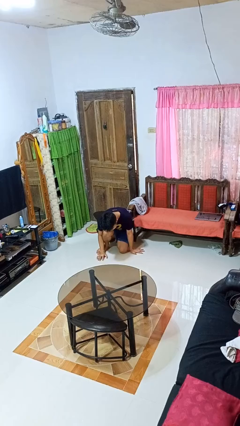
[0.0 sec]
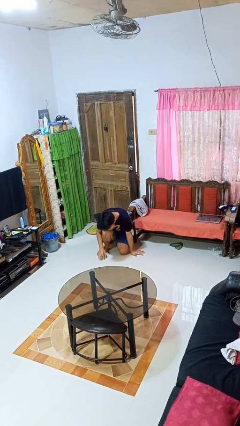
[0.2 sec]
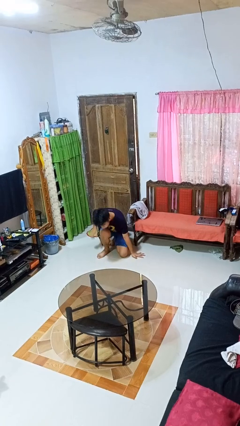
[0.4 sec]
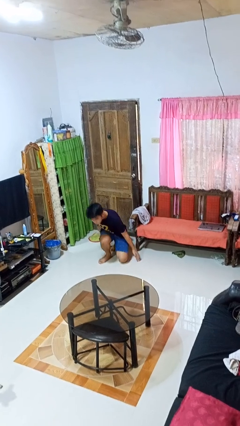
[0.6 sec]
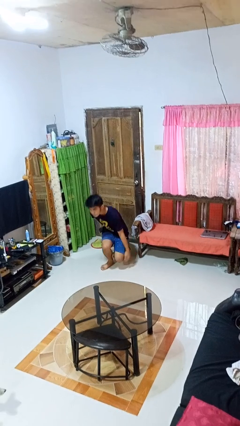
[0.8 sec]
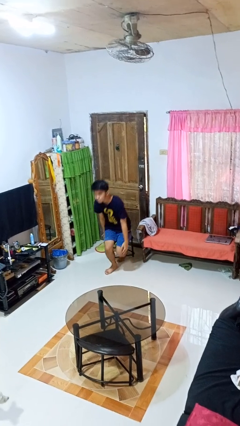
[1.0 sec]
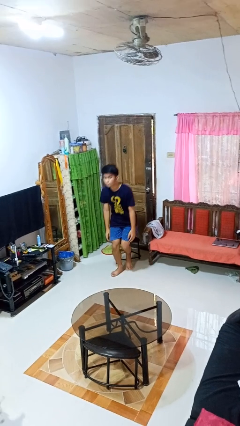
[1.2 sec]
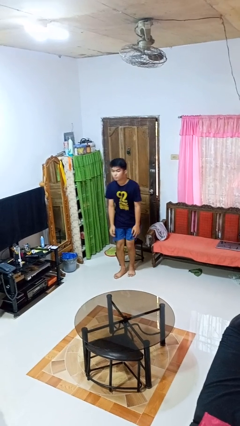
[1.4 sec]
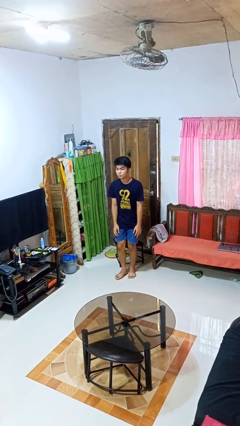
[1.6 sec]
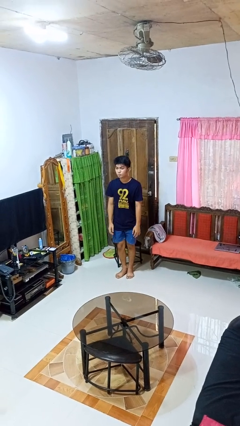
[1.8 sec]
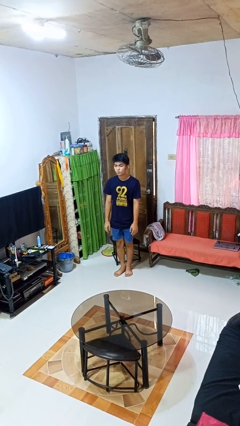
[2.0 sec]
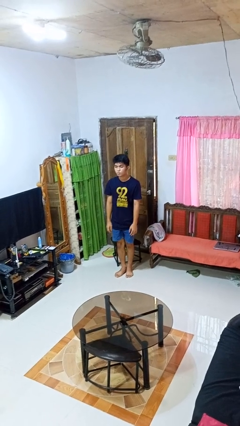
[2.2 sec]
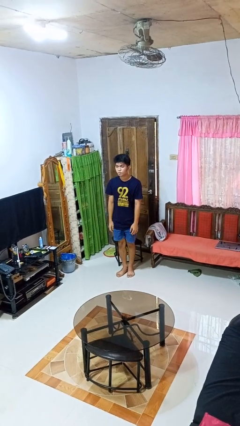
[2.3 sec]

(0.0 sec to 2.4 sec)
person stands up from floor

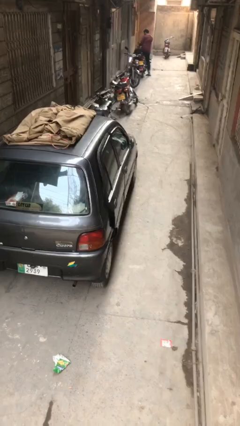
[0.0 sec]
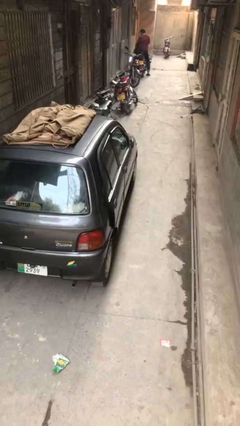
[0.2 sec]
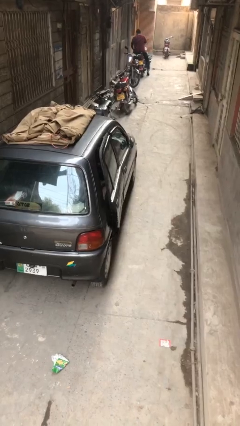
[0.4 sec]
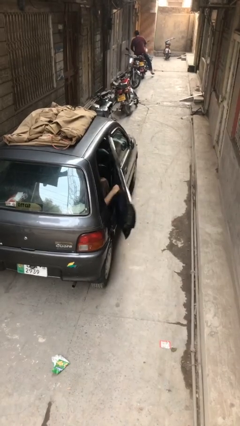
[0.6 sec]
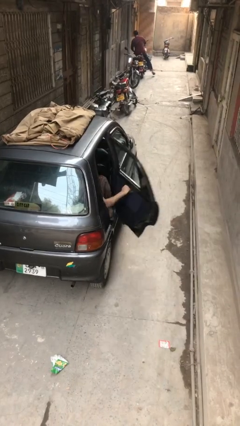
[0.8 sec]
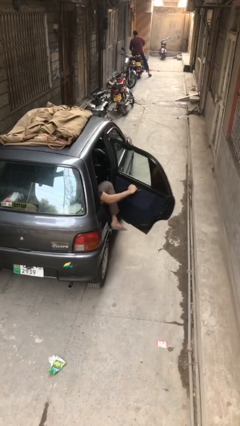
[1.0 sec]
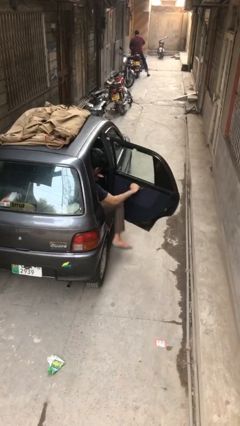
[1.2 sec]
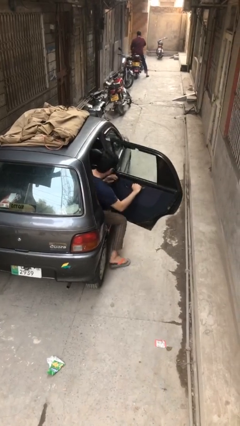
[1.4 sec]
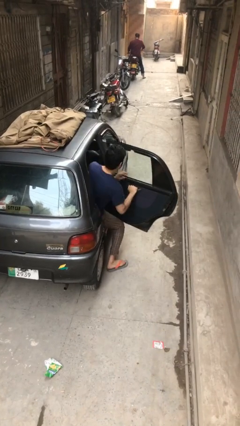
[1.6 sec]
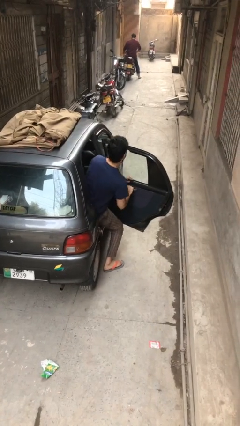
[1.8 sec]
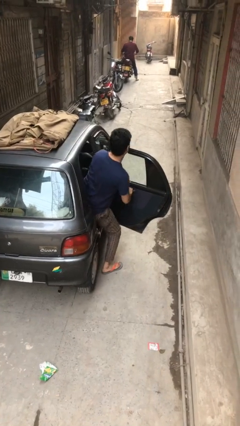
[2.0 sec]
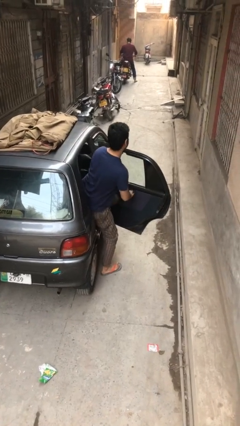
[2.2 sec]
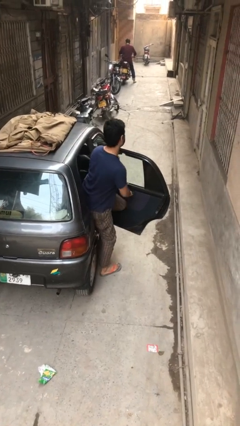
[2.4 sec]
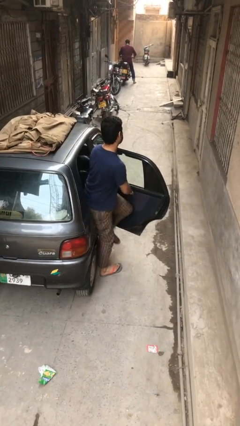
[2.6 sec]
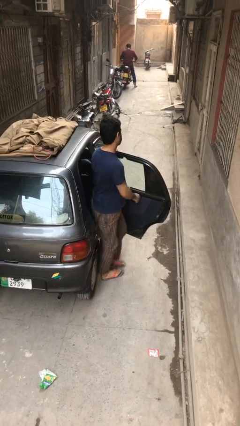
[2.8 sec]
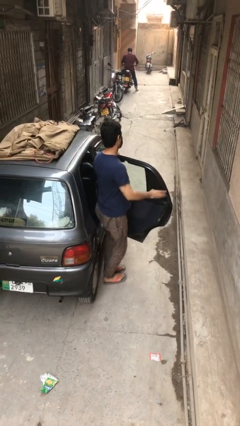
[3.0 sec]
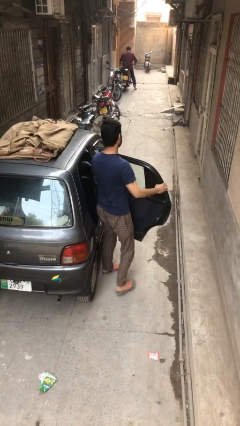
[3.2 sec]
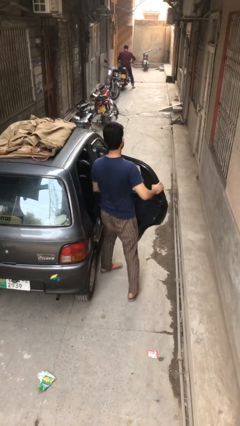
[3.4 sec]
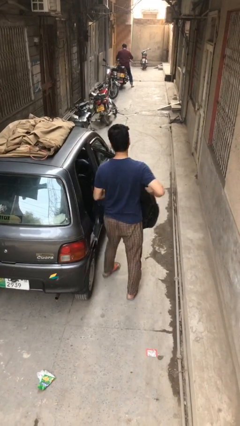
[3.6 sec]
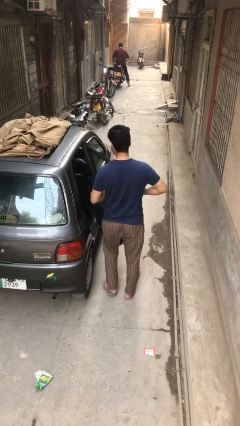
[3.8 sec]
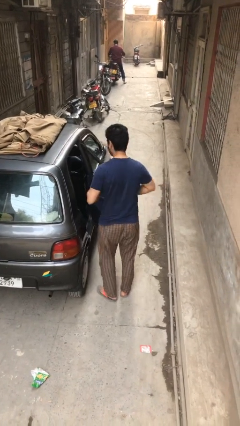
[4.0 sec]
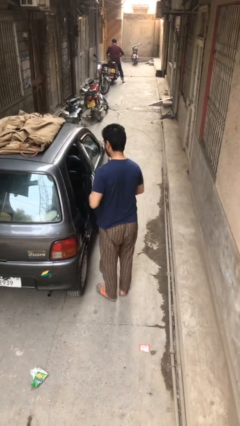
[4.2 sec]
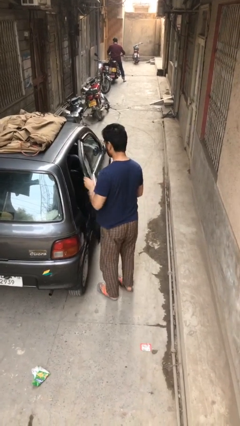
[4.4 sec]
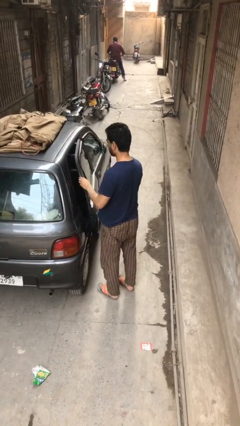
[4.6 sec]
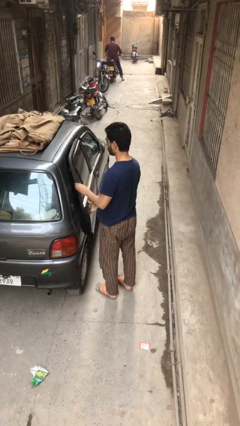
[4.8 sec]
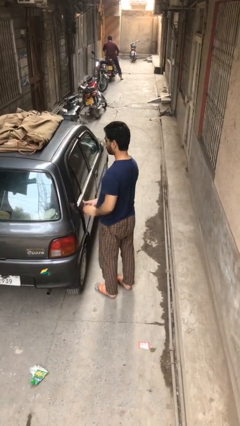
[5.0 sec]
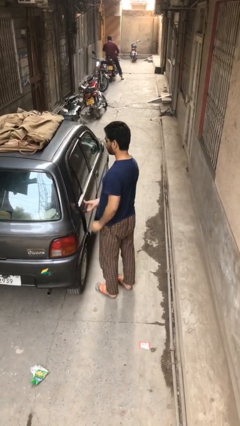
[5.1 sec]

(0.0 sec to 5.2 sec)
car drops off person

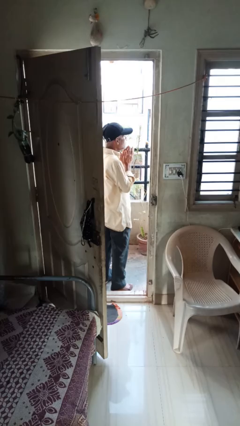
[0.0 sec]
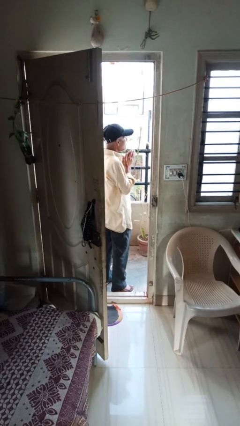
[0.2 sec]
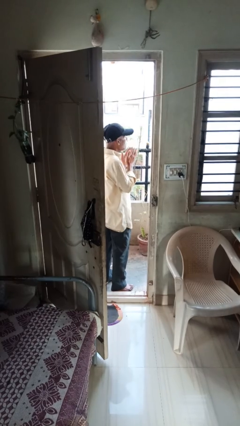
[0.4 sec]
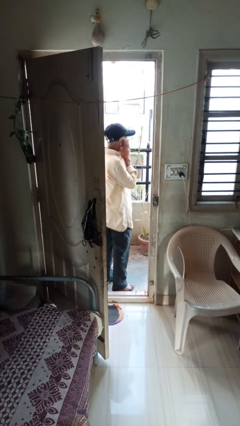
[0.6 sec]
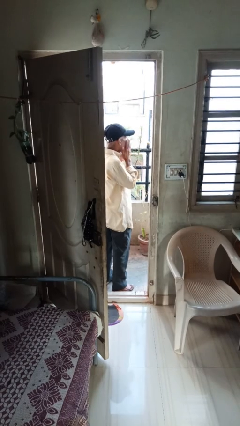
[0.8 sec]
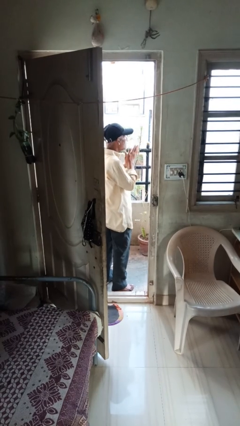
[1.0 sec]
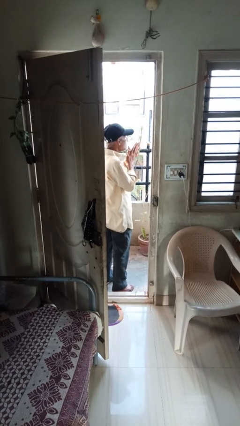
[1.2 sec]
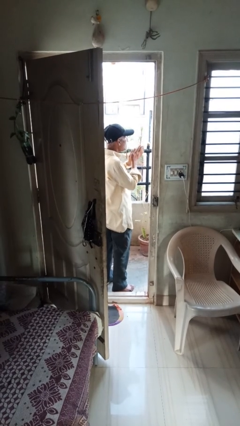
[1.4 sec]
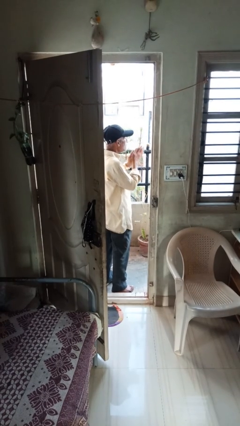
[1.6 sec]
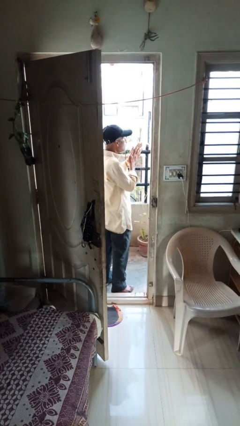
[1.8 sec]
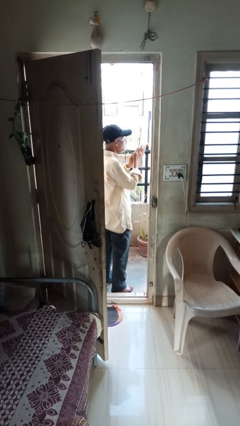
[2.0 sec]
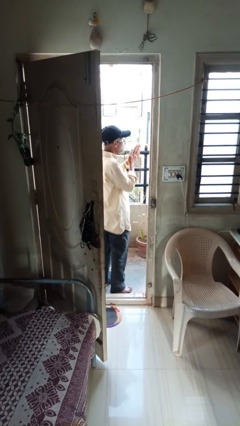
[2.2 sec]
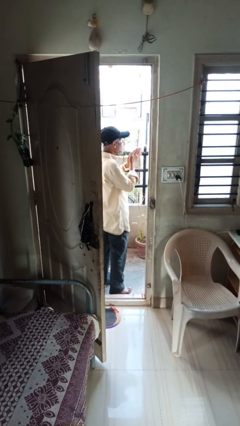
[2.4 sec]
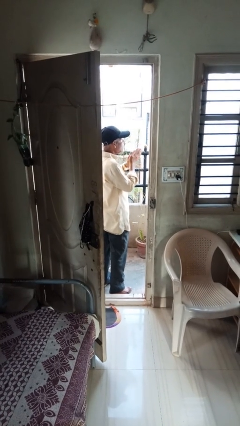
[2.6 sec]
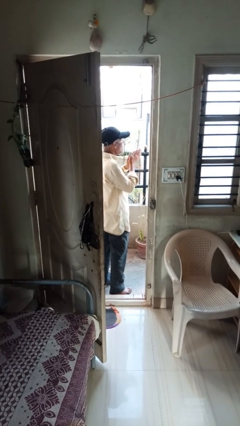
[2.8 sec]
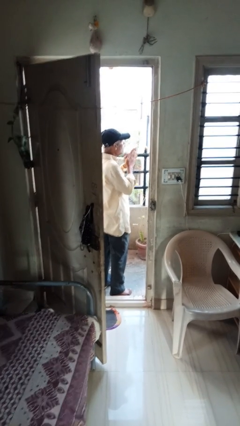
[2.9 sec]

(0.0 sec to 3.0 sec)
person blows into hands

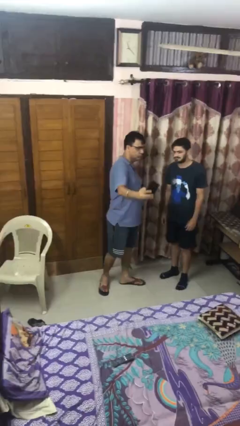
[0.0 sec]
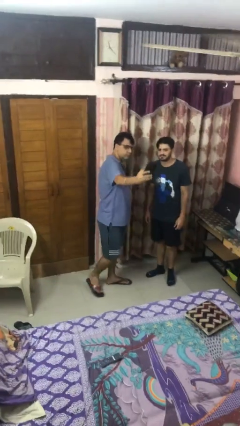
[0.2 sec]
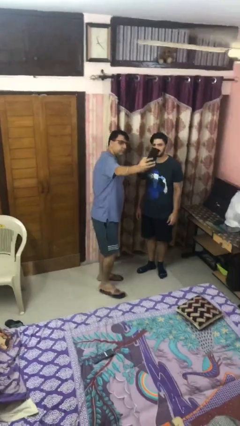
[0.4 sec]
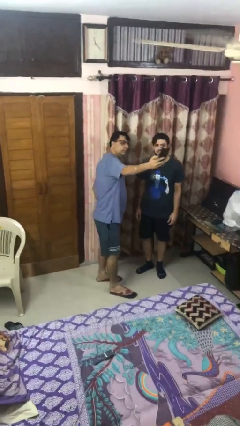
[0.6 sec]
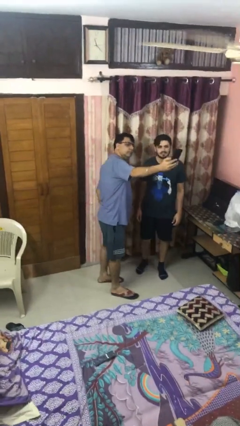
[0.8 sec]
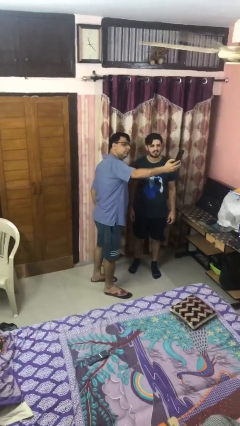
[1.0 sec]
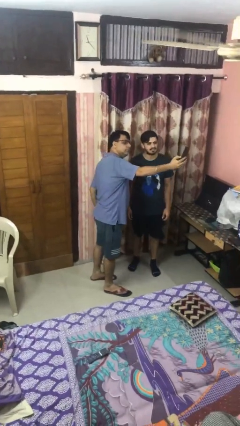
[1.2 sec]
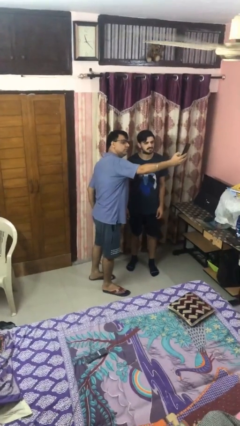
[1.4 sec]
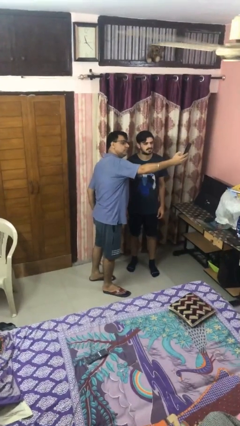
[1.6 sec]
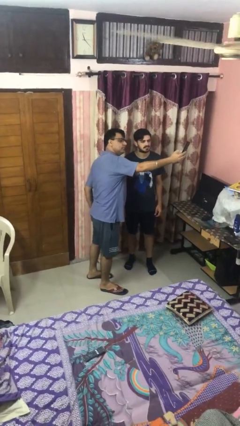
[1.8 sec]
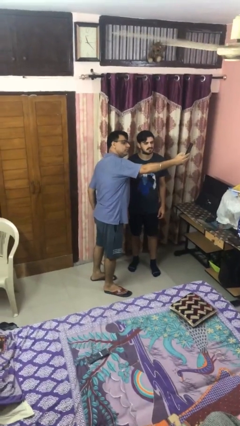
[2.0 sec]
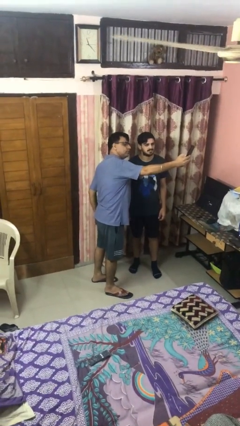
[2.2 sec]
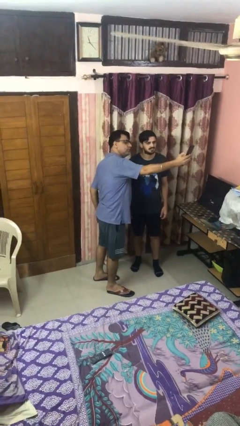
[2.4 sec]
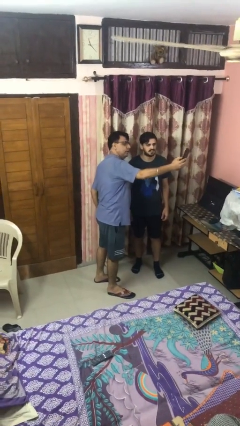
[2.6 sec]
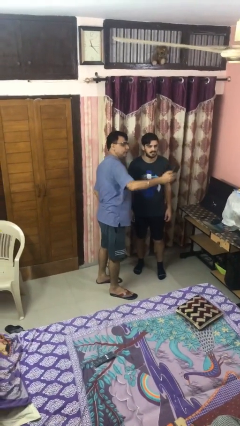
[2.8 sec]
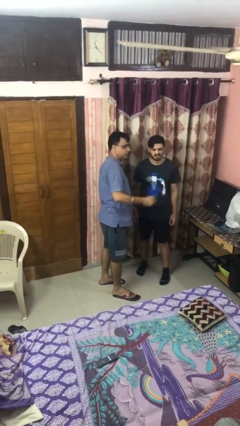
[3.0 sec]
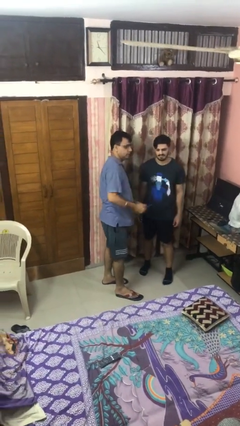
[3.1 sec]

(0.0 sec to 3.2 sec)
person takes selfie with person

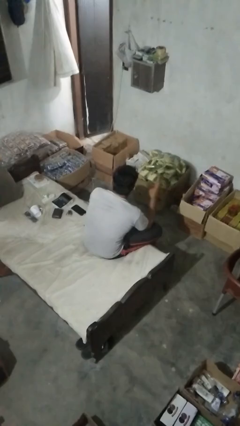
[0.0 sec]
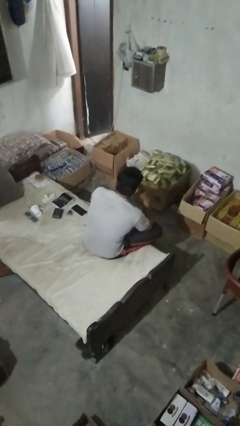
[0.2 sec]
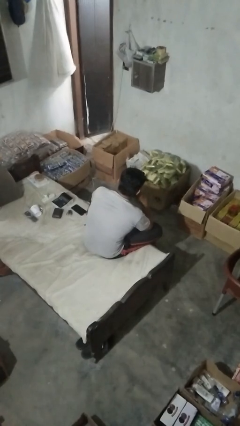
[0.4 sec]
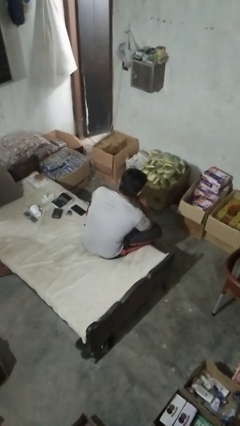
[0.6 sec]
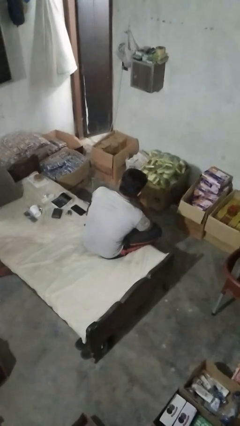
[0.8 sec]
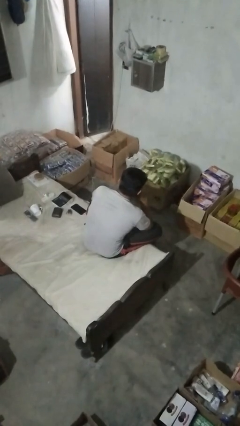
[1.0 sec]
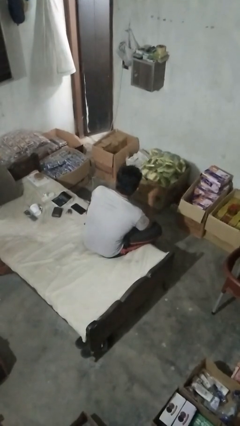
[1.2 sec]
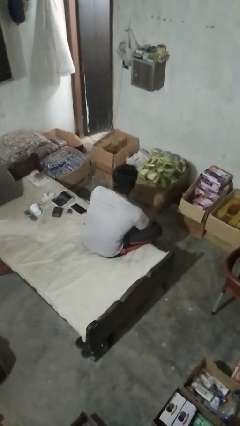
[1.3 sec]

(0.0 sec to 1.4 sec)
person strokes chin

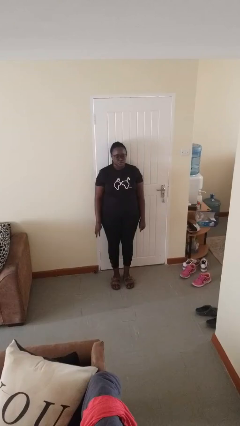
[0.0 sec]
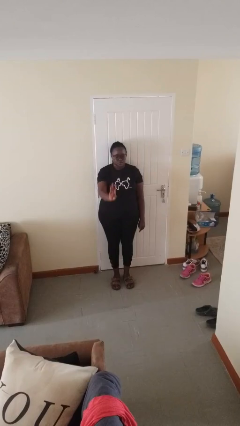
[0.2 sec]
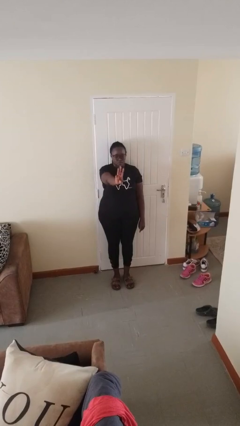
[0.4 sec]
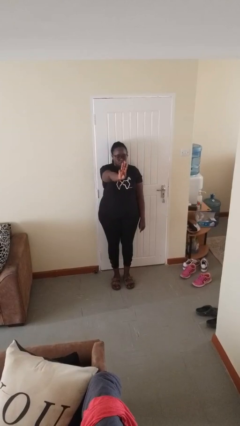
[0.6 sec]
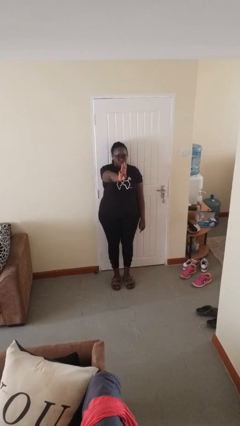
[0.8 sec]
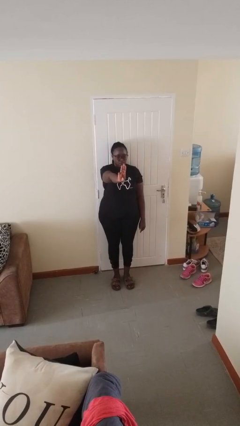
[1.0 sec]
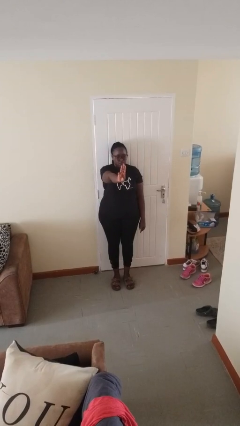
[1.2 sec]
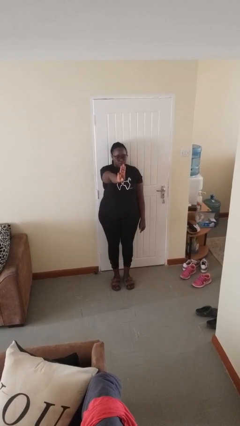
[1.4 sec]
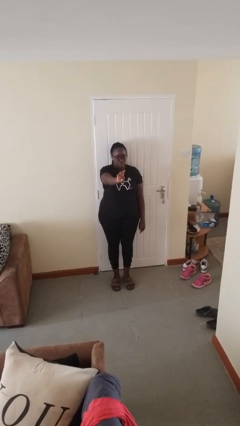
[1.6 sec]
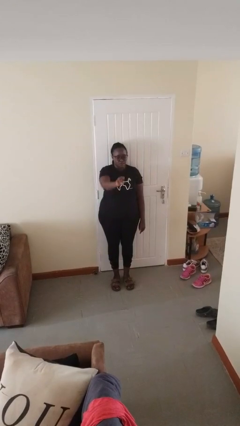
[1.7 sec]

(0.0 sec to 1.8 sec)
person gestures number three
